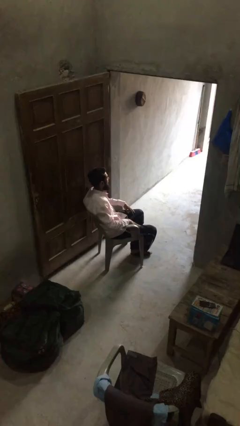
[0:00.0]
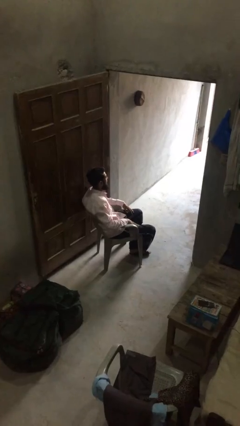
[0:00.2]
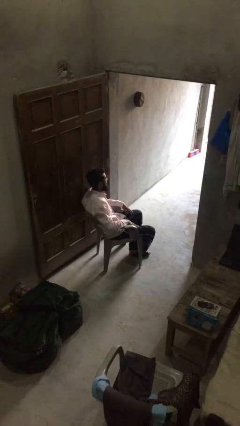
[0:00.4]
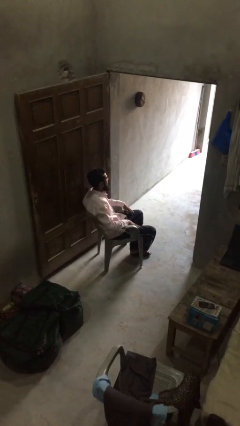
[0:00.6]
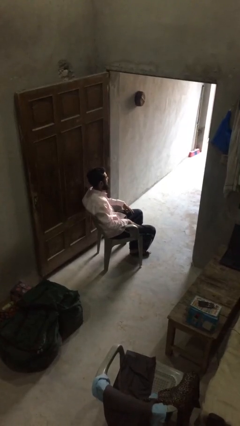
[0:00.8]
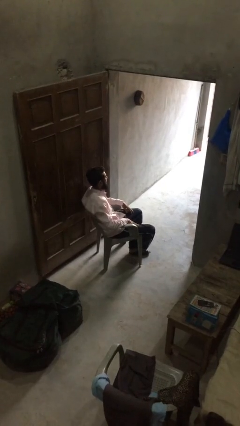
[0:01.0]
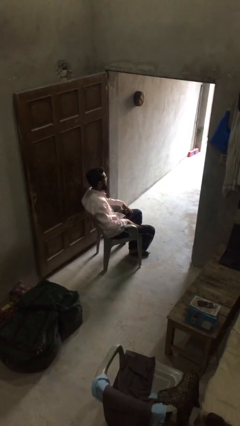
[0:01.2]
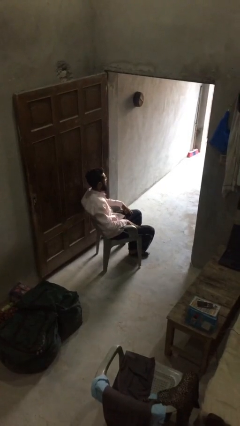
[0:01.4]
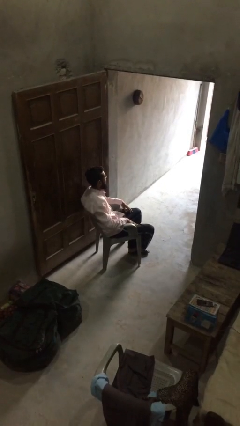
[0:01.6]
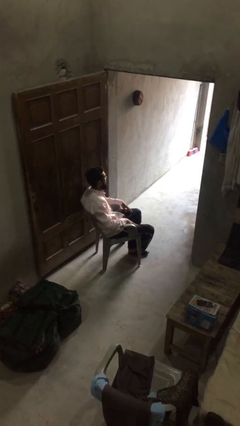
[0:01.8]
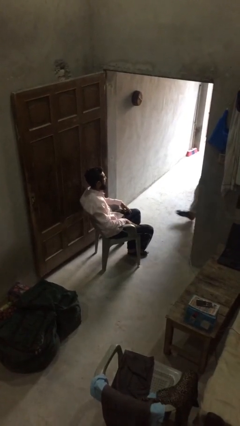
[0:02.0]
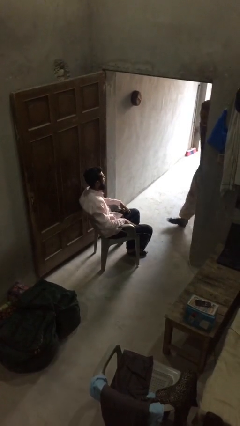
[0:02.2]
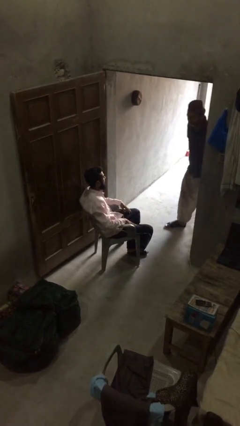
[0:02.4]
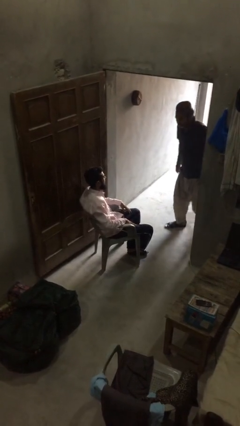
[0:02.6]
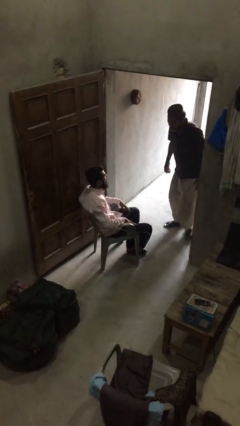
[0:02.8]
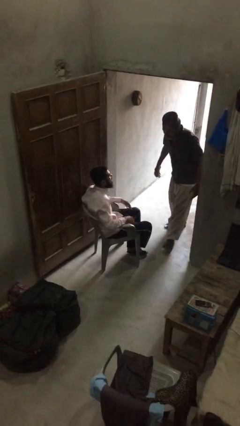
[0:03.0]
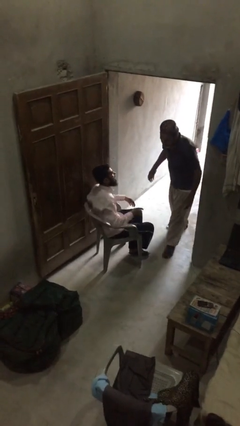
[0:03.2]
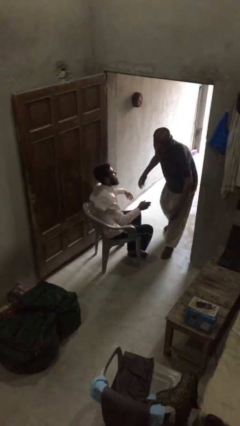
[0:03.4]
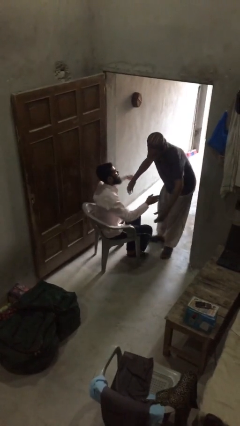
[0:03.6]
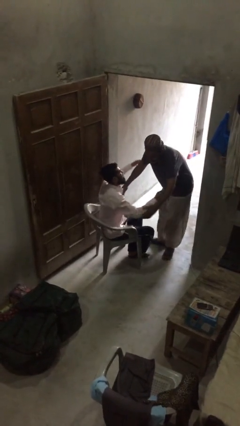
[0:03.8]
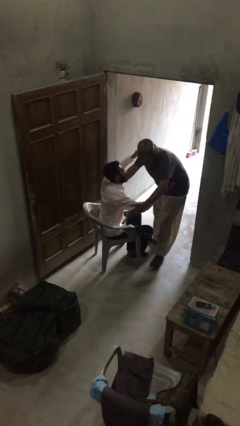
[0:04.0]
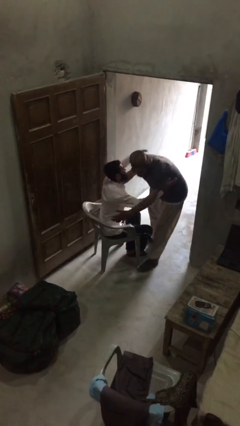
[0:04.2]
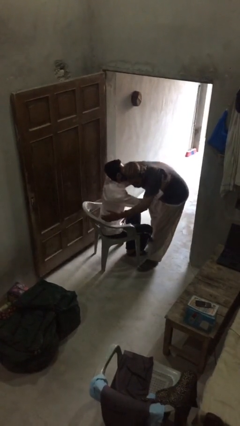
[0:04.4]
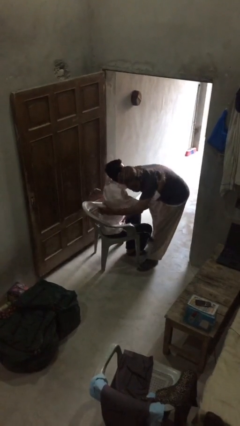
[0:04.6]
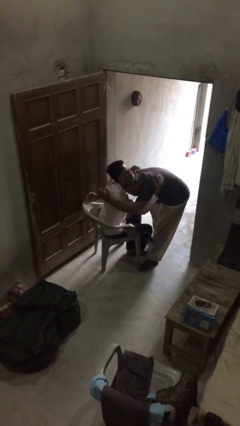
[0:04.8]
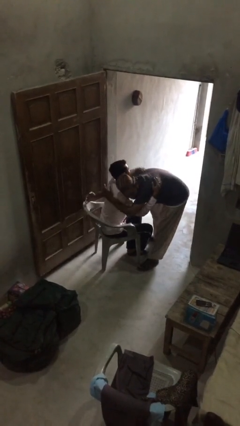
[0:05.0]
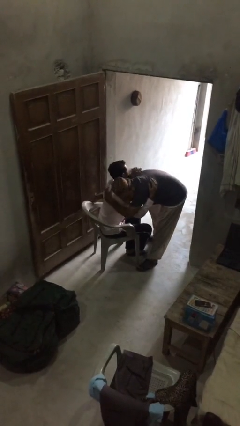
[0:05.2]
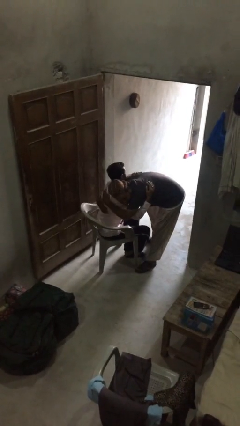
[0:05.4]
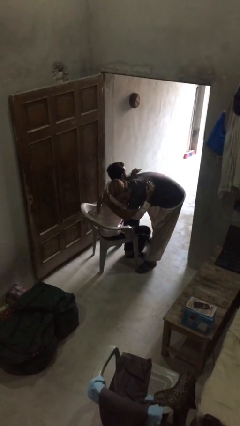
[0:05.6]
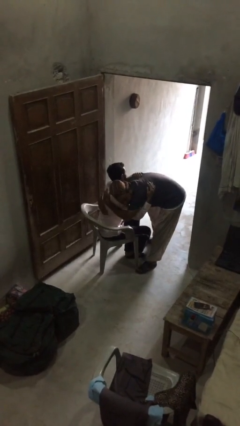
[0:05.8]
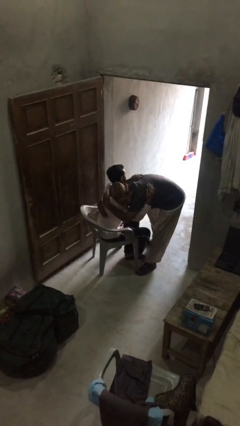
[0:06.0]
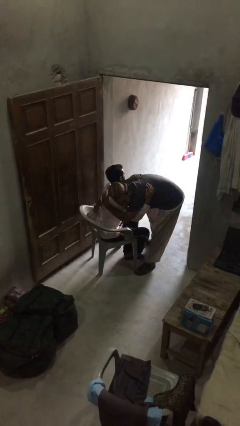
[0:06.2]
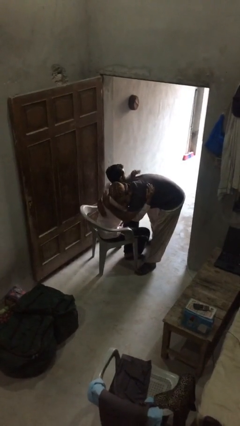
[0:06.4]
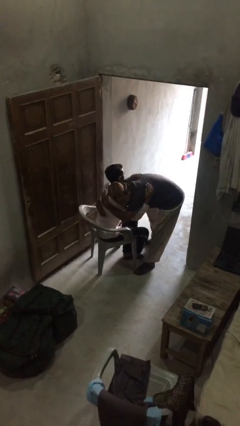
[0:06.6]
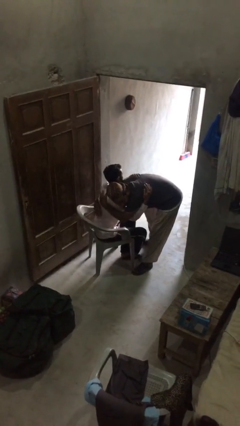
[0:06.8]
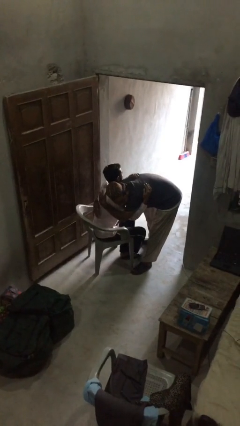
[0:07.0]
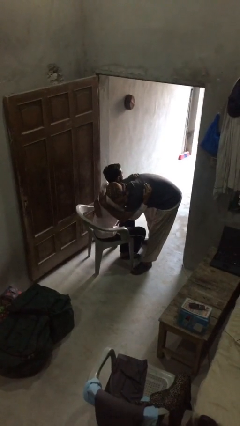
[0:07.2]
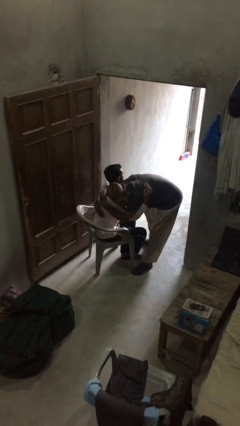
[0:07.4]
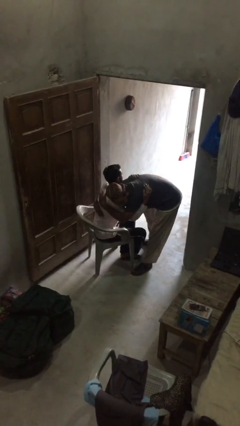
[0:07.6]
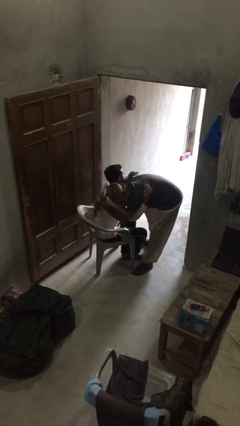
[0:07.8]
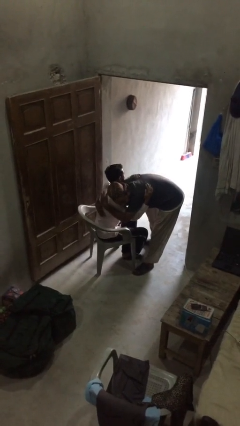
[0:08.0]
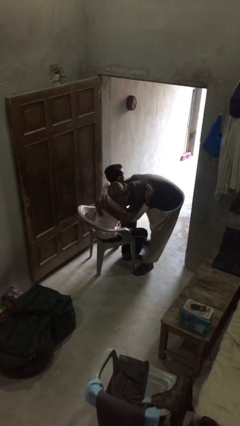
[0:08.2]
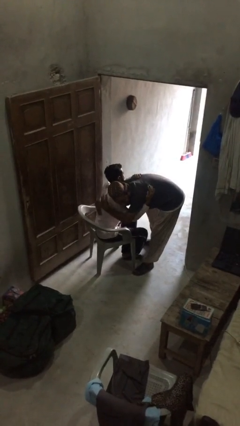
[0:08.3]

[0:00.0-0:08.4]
person embraces person

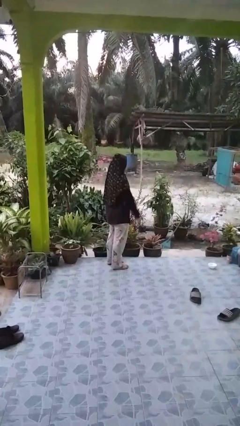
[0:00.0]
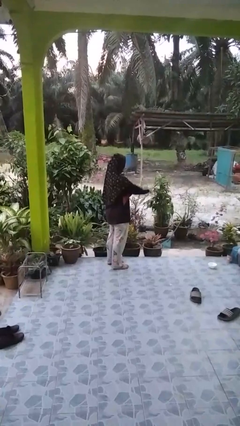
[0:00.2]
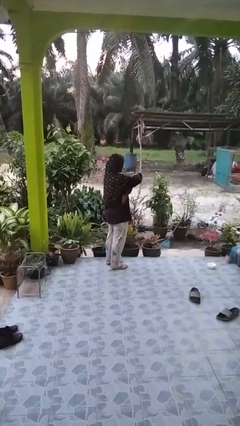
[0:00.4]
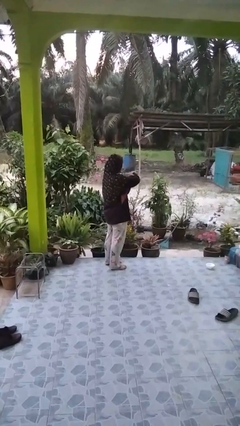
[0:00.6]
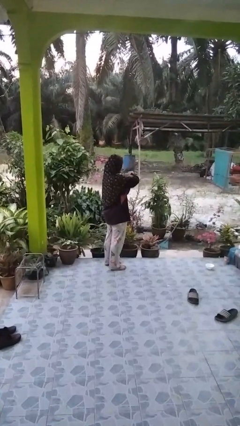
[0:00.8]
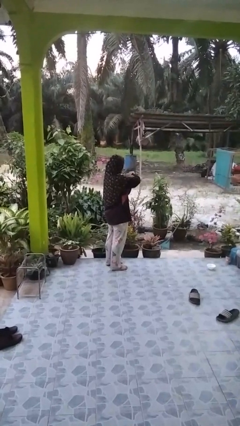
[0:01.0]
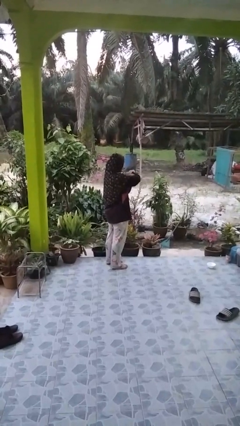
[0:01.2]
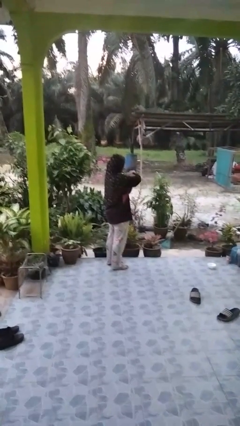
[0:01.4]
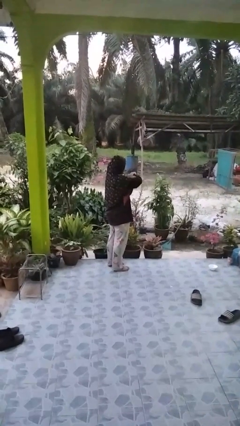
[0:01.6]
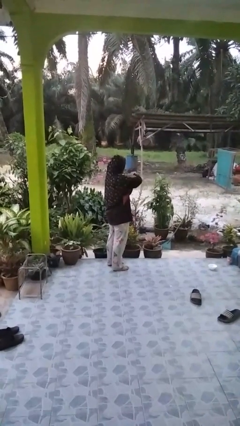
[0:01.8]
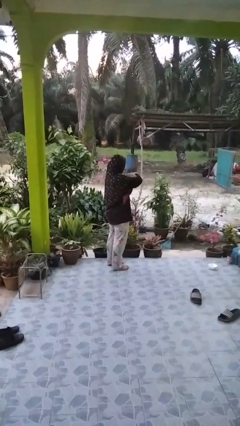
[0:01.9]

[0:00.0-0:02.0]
person looks at wristwatch

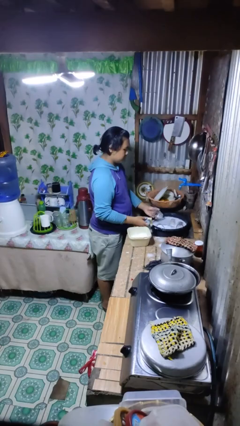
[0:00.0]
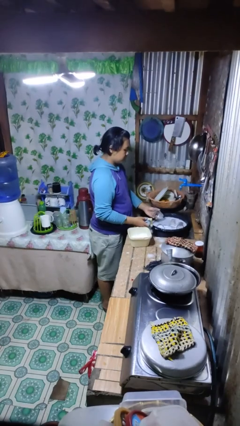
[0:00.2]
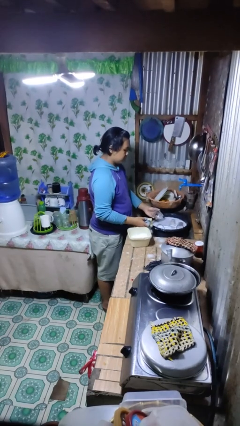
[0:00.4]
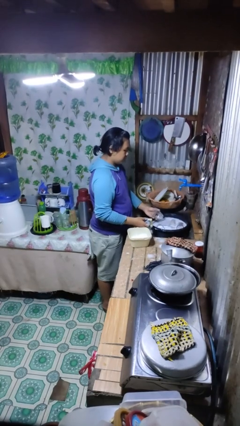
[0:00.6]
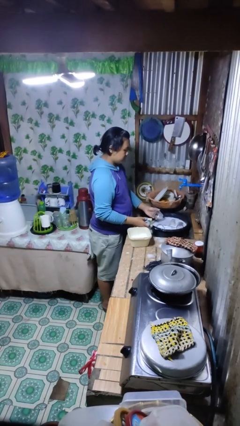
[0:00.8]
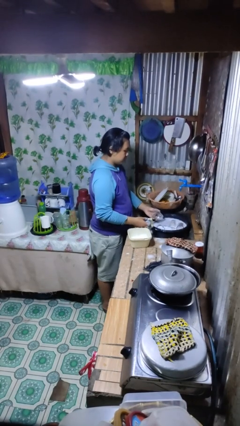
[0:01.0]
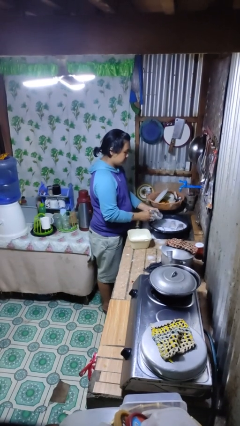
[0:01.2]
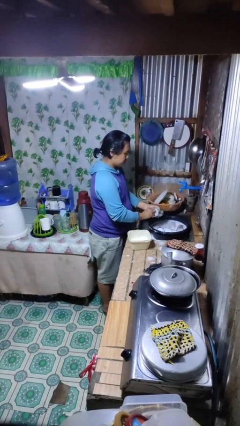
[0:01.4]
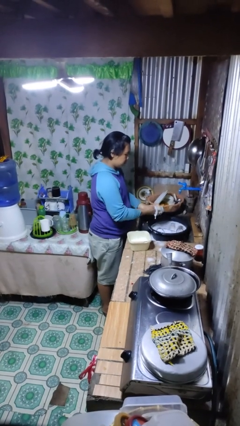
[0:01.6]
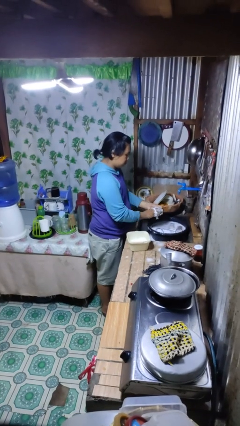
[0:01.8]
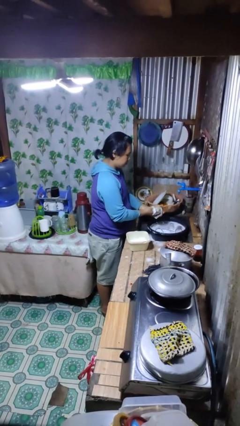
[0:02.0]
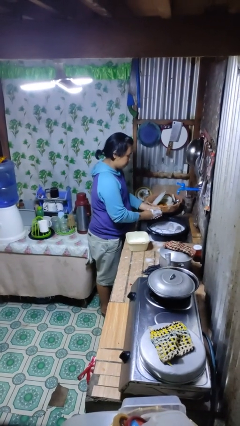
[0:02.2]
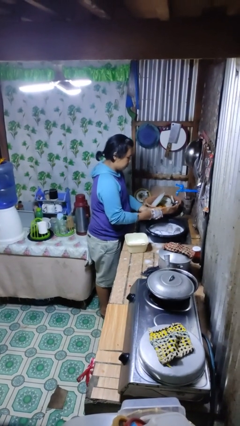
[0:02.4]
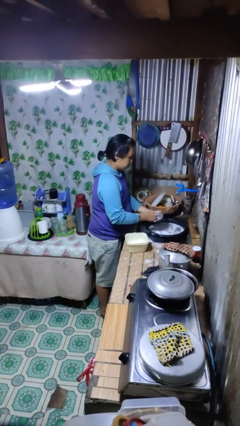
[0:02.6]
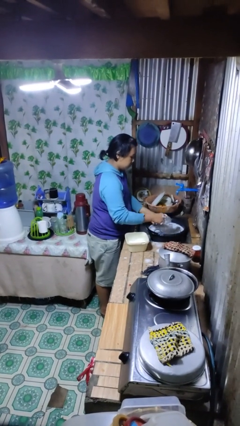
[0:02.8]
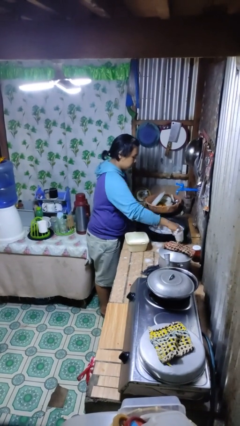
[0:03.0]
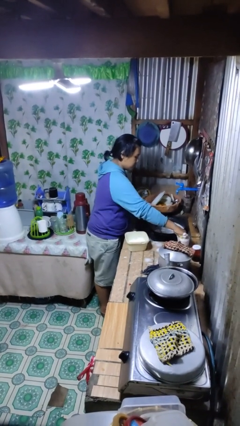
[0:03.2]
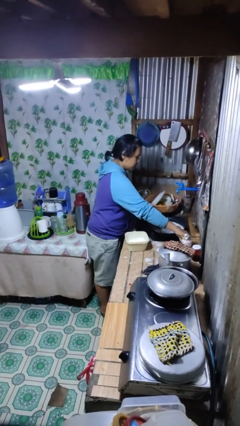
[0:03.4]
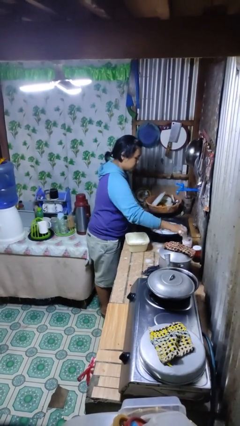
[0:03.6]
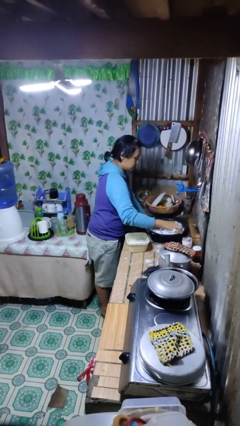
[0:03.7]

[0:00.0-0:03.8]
person washes dish

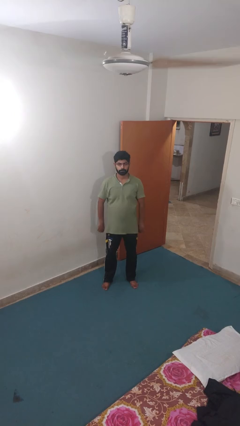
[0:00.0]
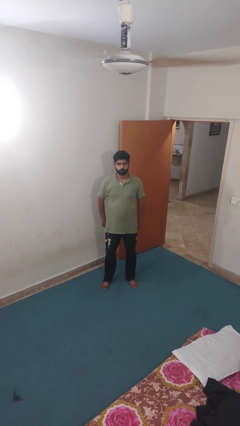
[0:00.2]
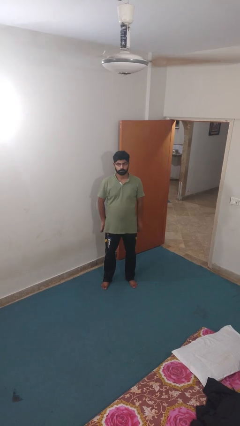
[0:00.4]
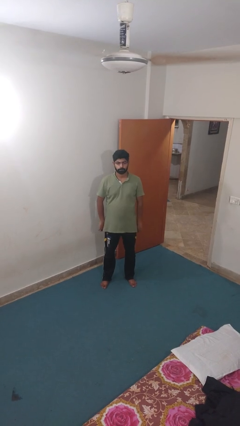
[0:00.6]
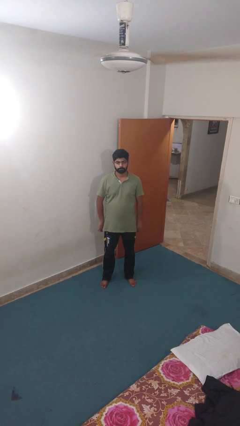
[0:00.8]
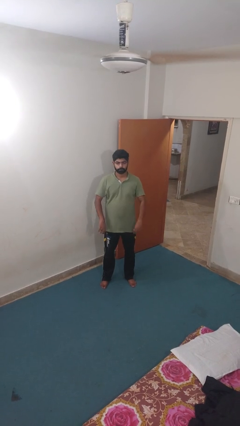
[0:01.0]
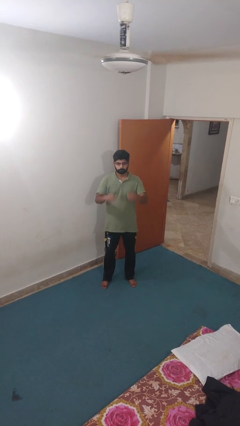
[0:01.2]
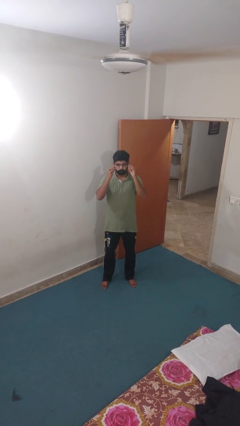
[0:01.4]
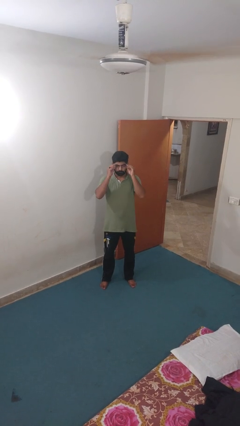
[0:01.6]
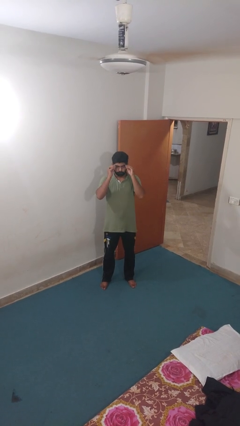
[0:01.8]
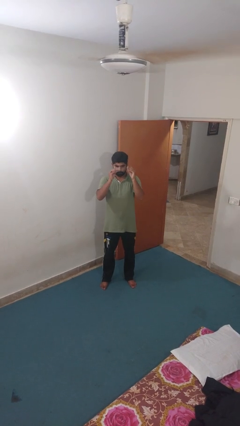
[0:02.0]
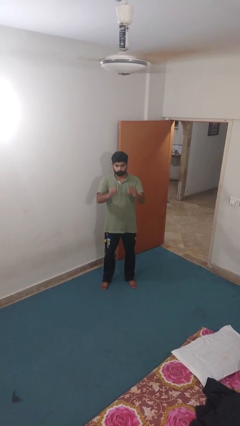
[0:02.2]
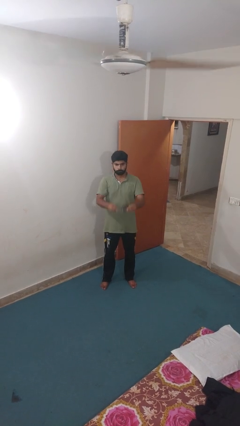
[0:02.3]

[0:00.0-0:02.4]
person takes off glasses

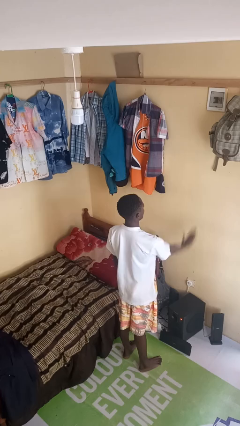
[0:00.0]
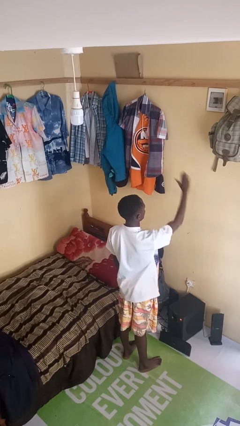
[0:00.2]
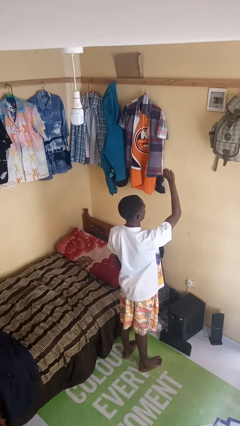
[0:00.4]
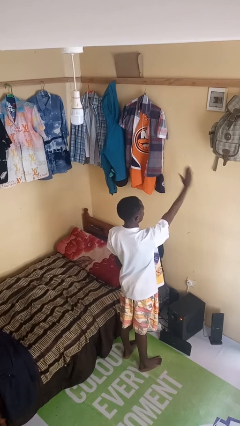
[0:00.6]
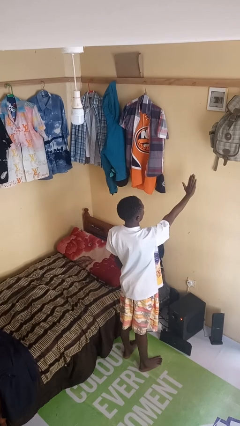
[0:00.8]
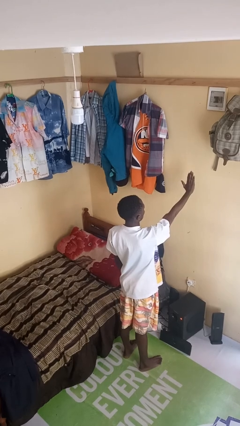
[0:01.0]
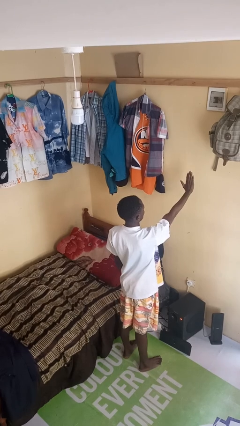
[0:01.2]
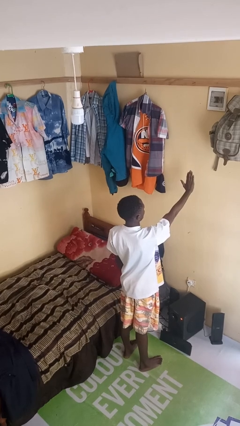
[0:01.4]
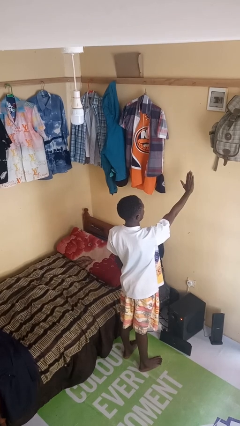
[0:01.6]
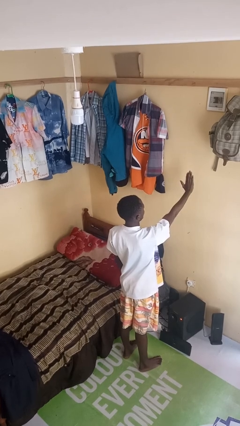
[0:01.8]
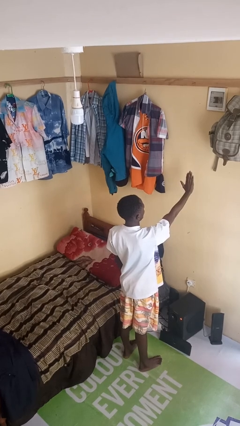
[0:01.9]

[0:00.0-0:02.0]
person gestures stop
